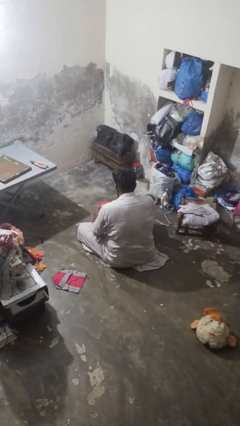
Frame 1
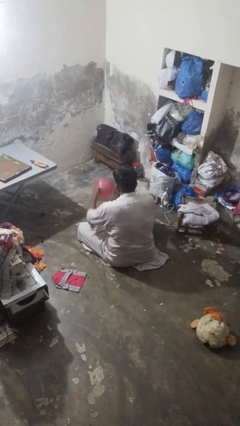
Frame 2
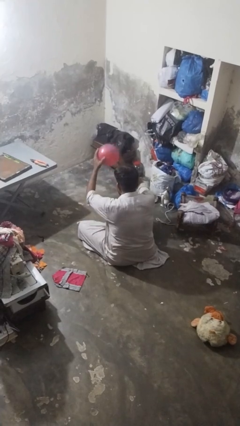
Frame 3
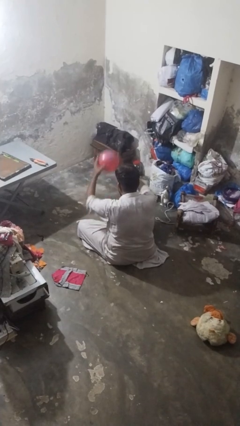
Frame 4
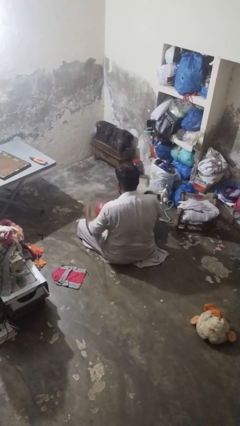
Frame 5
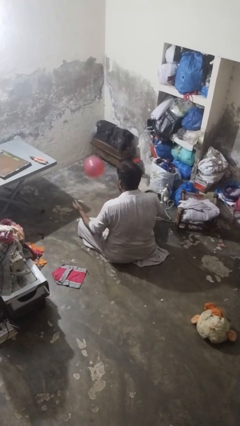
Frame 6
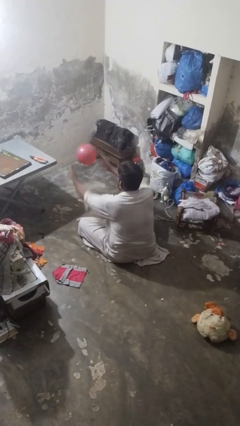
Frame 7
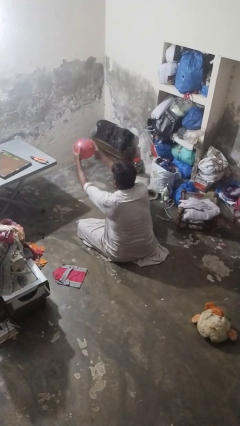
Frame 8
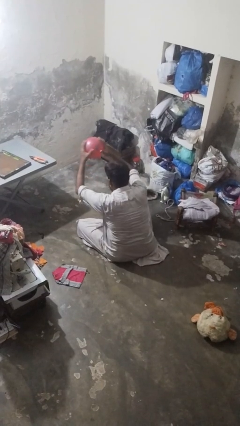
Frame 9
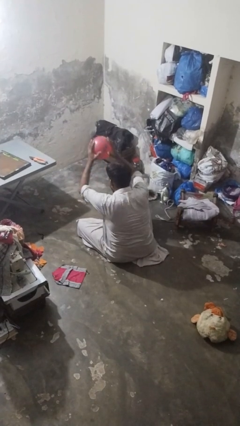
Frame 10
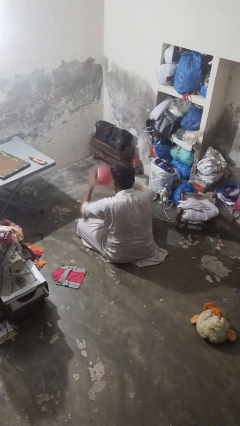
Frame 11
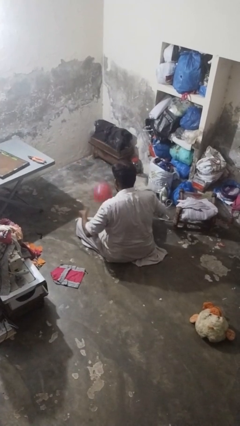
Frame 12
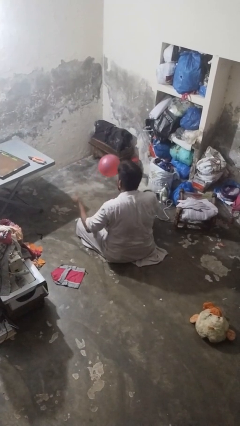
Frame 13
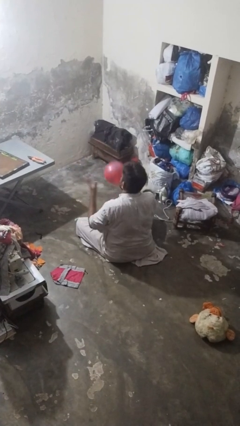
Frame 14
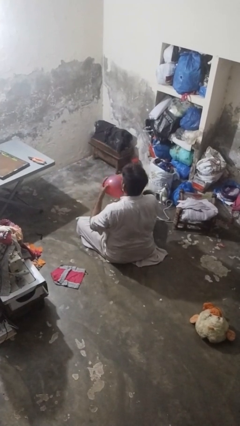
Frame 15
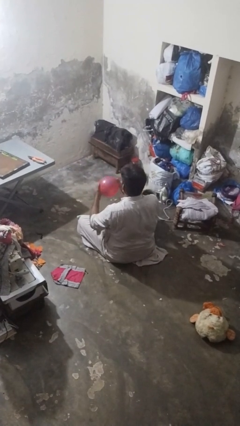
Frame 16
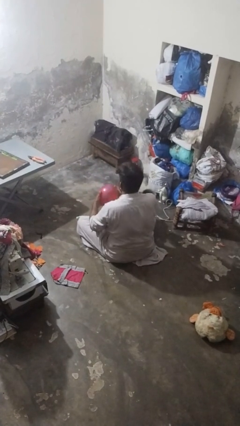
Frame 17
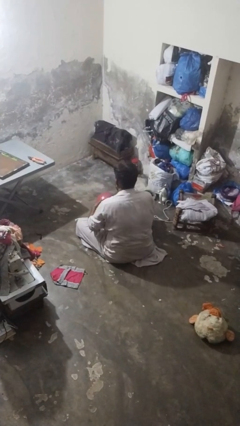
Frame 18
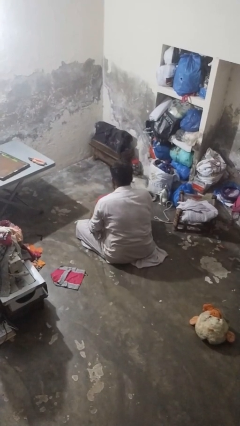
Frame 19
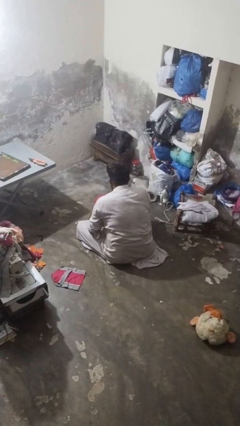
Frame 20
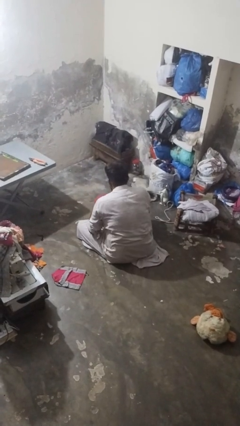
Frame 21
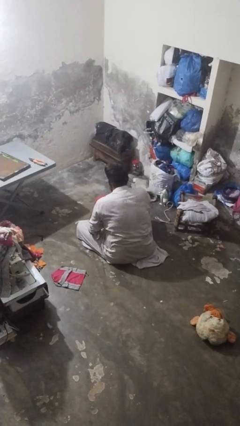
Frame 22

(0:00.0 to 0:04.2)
person bounces ball on floor

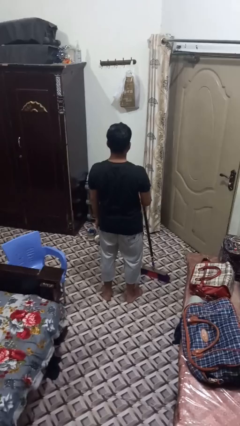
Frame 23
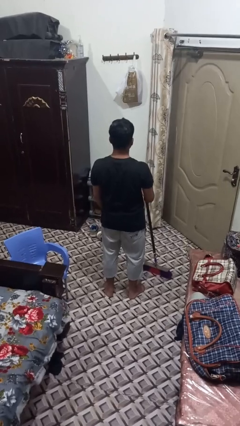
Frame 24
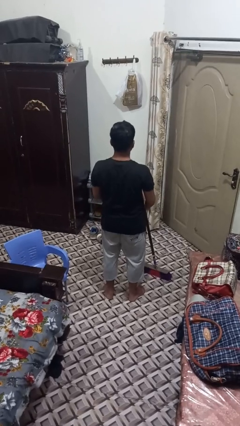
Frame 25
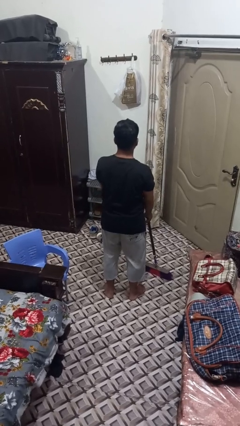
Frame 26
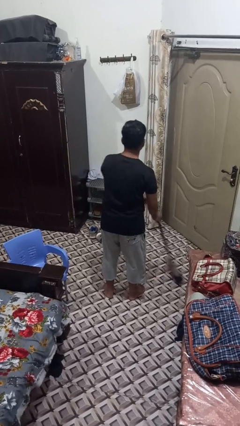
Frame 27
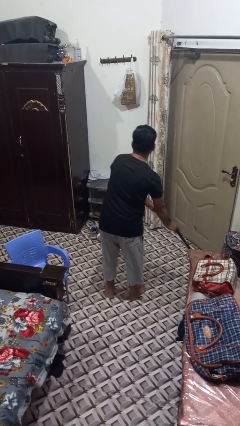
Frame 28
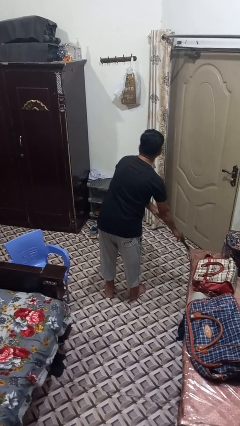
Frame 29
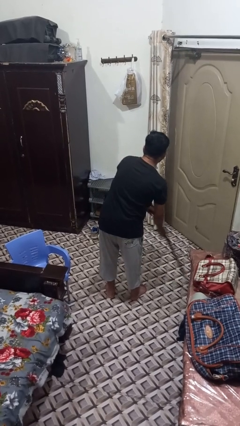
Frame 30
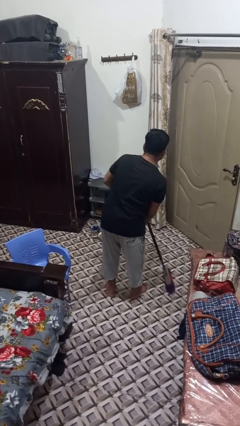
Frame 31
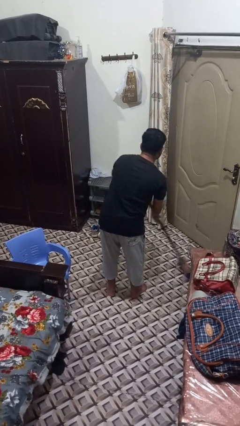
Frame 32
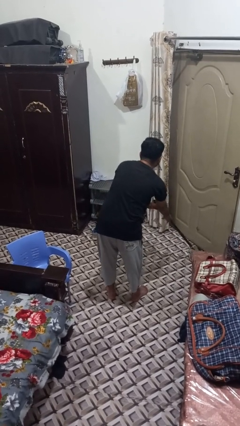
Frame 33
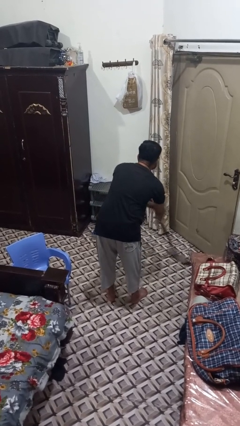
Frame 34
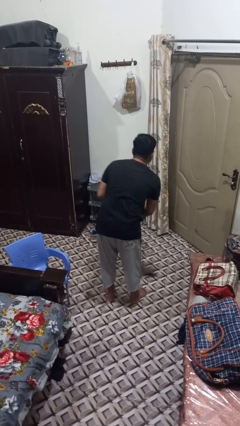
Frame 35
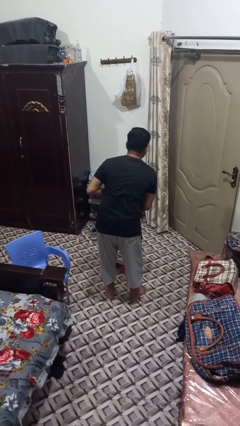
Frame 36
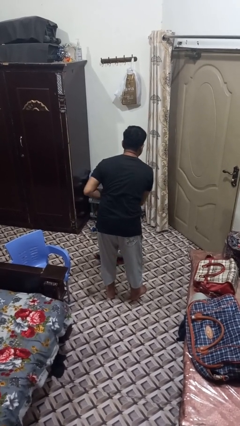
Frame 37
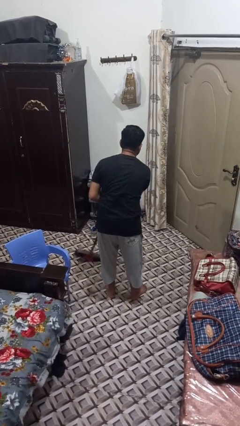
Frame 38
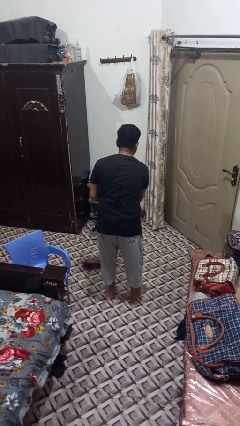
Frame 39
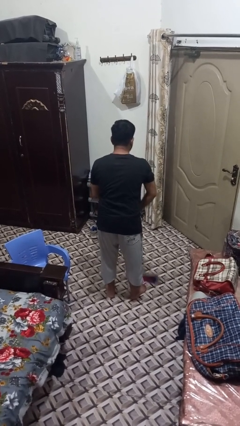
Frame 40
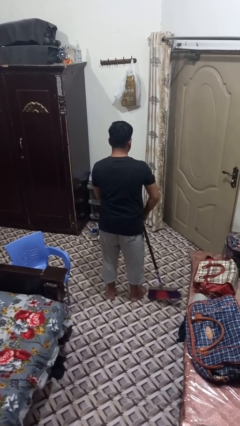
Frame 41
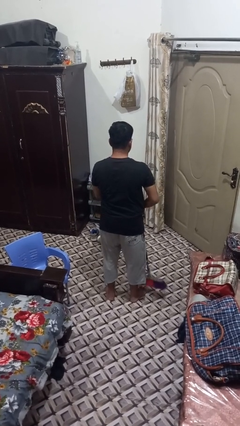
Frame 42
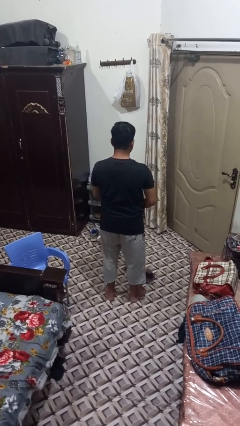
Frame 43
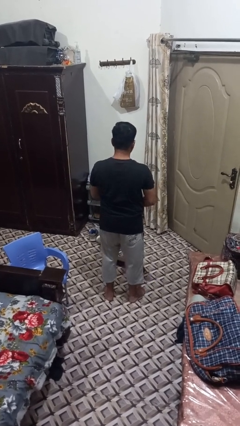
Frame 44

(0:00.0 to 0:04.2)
person sweeps floor

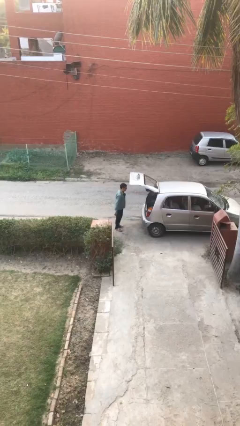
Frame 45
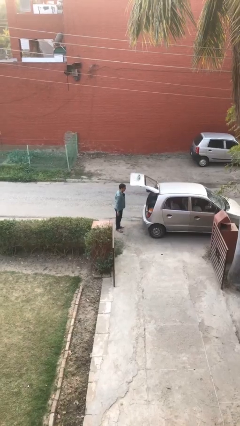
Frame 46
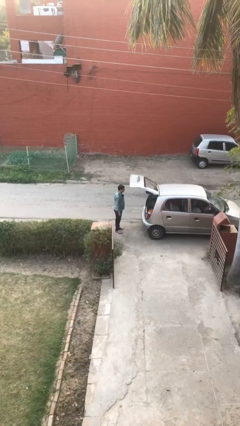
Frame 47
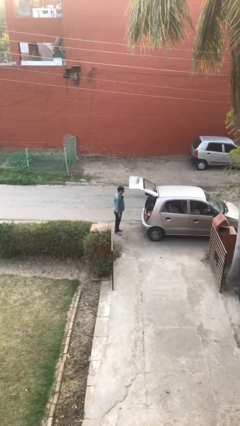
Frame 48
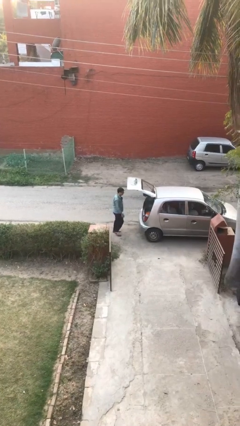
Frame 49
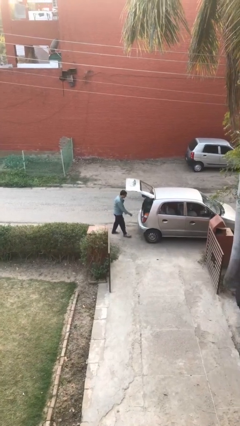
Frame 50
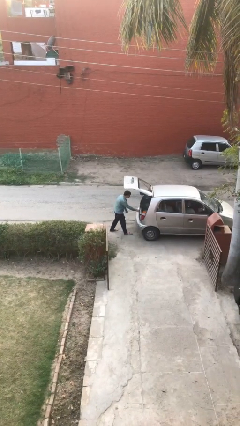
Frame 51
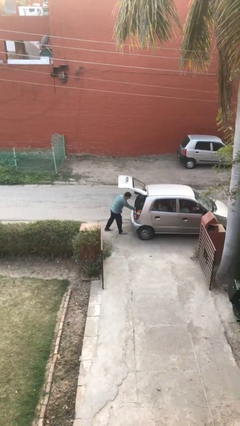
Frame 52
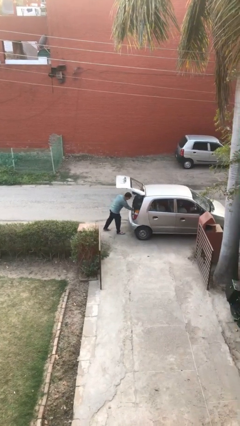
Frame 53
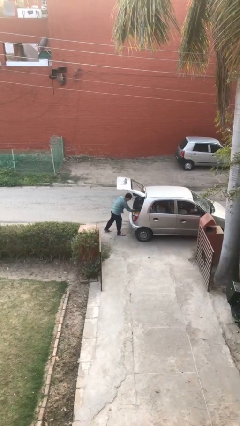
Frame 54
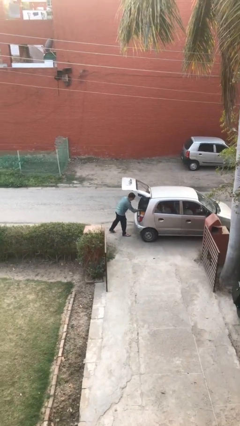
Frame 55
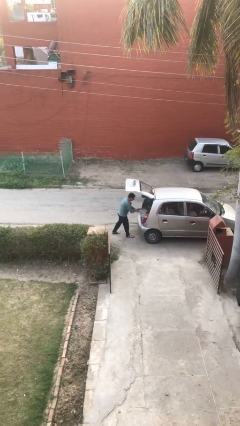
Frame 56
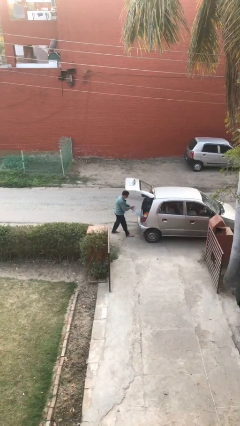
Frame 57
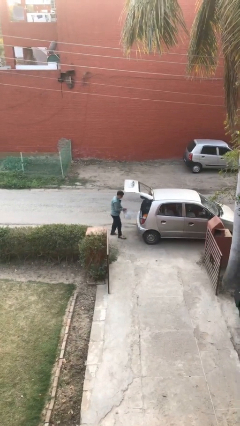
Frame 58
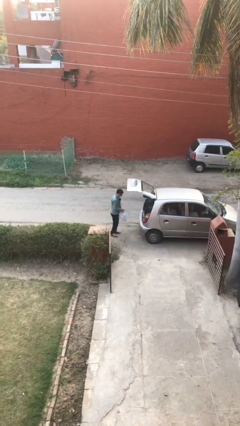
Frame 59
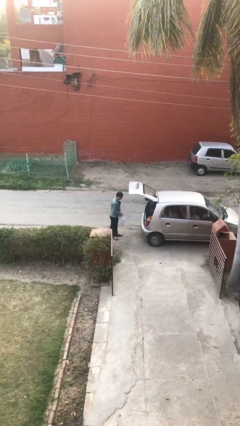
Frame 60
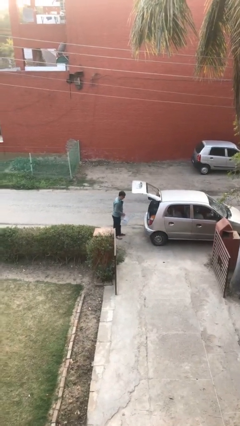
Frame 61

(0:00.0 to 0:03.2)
person unloads car

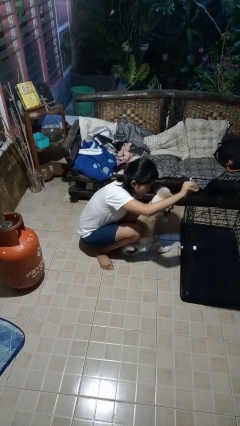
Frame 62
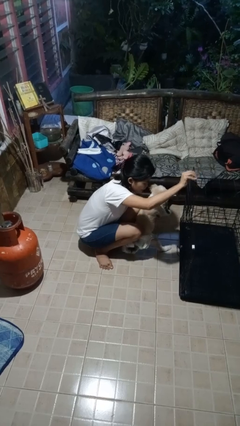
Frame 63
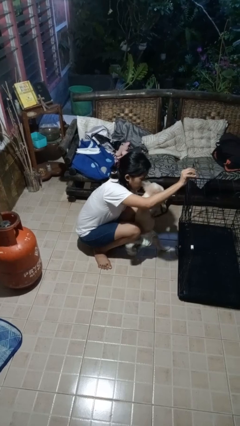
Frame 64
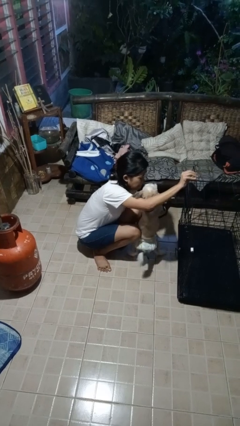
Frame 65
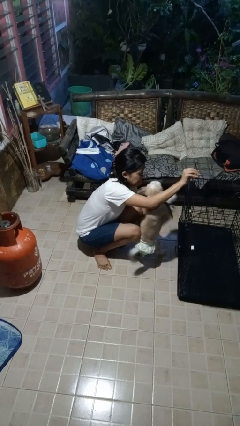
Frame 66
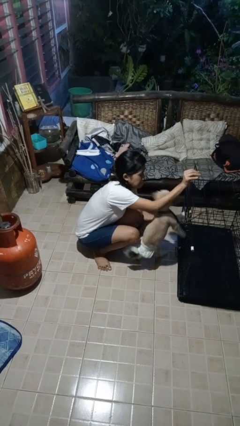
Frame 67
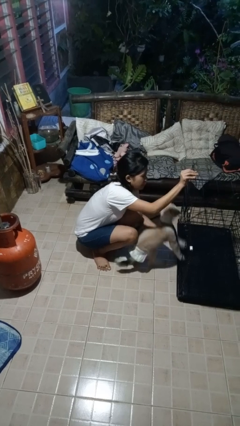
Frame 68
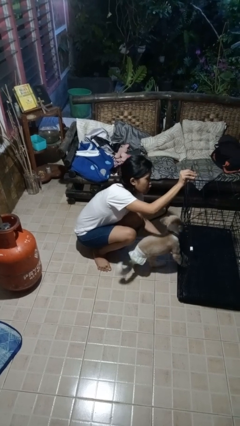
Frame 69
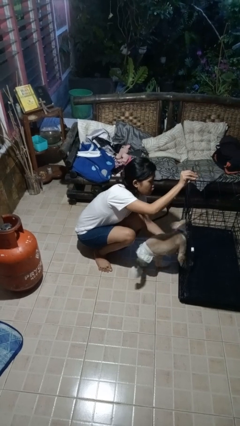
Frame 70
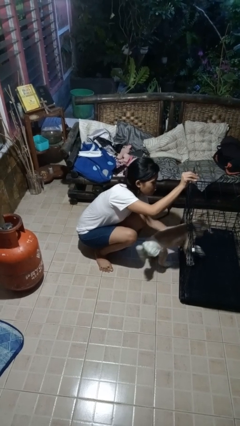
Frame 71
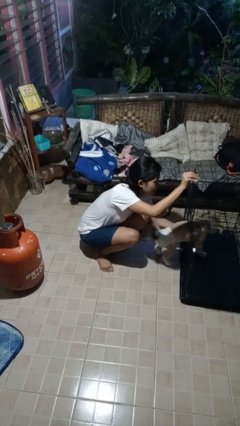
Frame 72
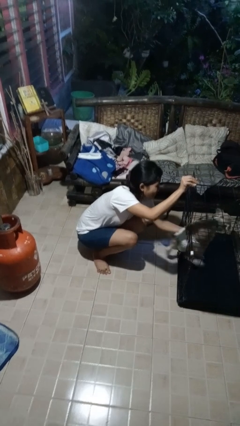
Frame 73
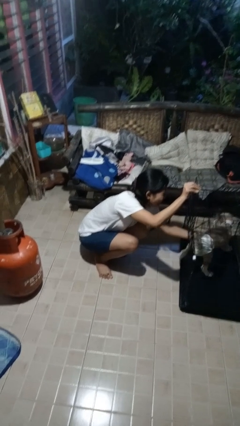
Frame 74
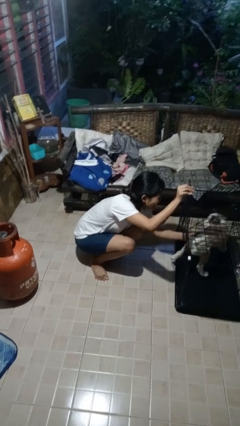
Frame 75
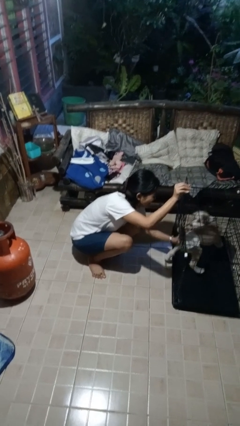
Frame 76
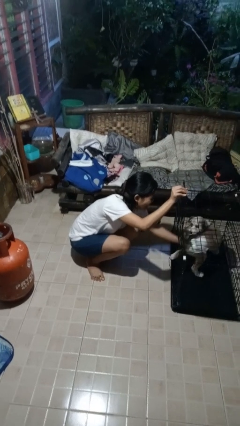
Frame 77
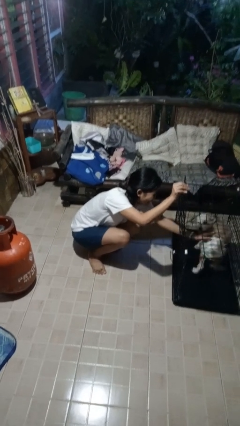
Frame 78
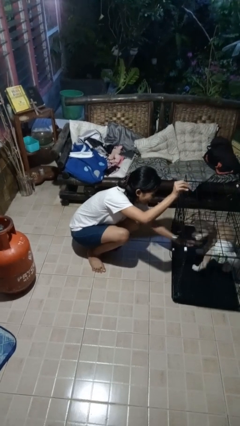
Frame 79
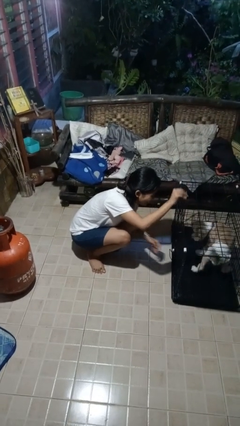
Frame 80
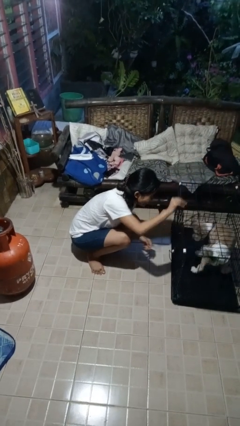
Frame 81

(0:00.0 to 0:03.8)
person crates dog

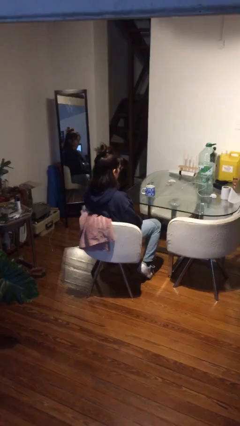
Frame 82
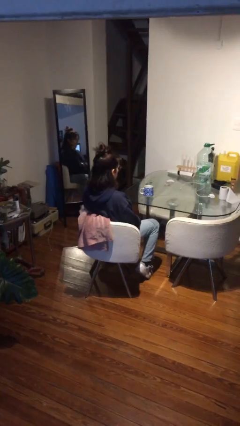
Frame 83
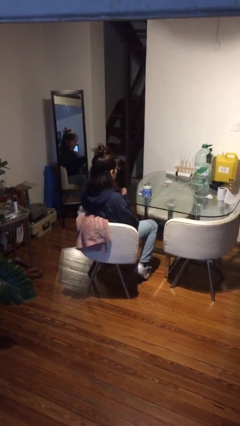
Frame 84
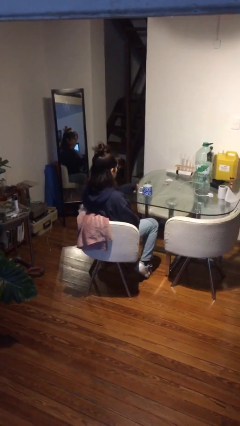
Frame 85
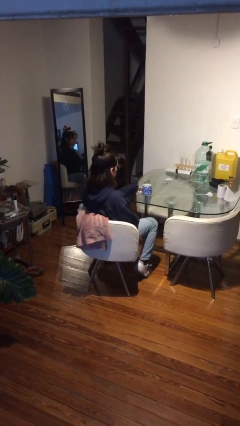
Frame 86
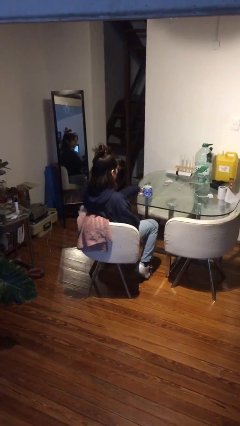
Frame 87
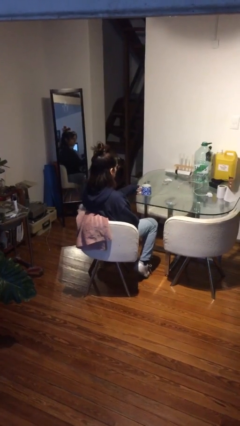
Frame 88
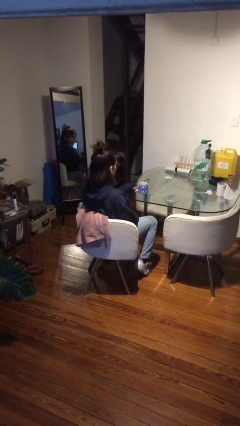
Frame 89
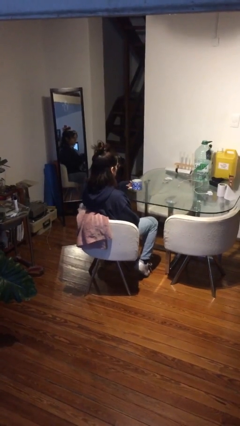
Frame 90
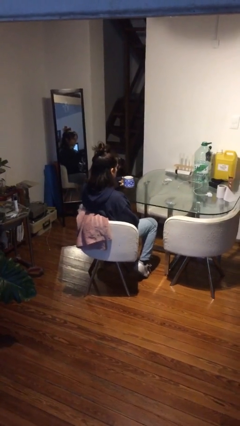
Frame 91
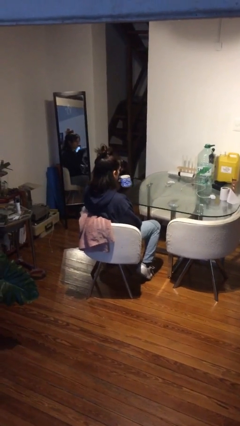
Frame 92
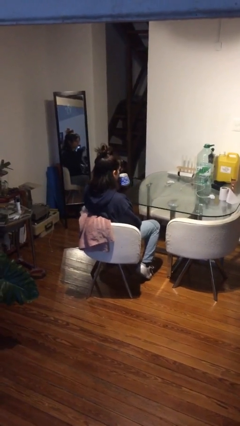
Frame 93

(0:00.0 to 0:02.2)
person picks up object from table
